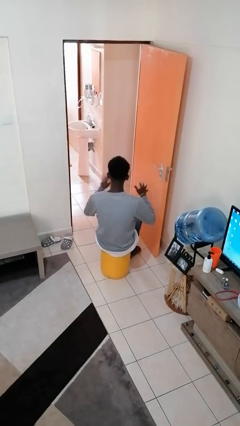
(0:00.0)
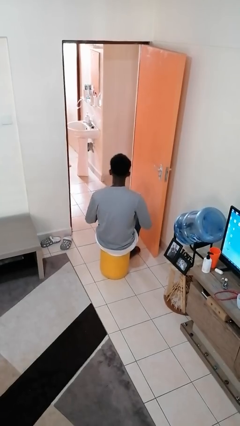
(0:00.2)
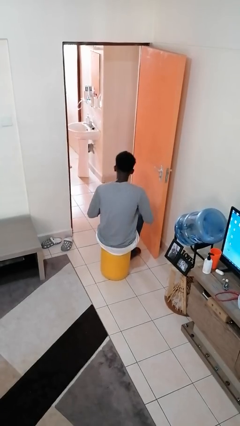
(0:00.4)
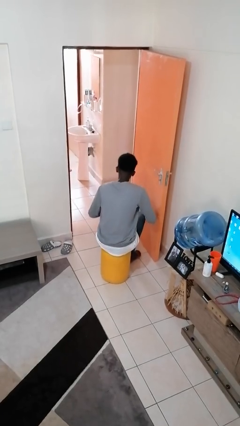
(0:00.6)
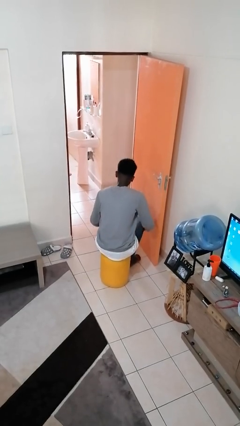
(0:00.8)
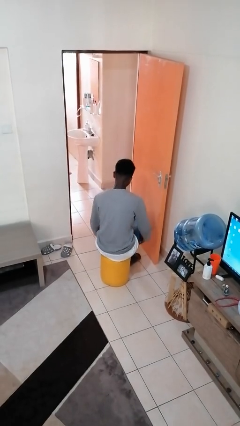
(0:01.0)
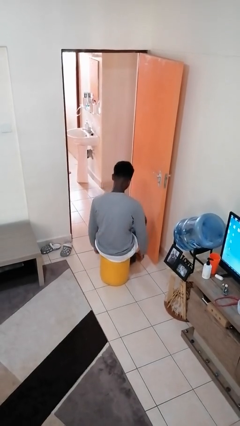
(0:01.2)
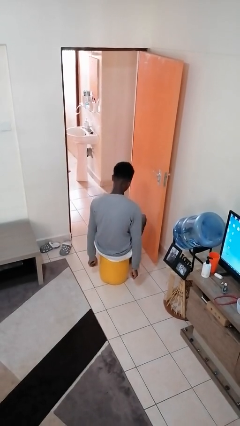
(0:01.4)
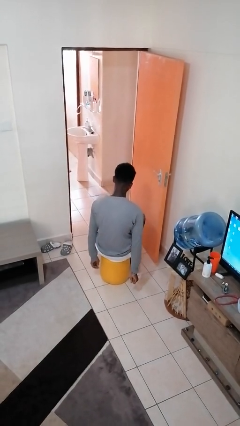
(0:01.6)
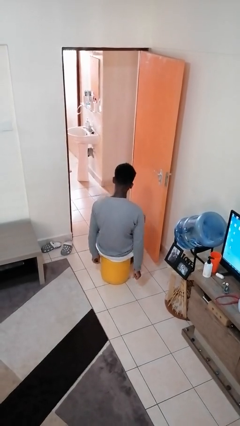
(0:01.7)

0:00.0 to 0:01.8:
person slaps hands on thighs

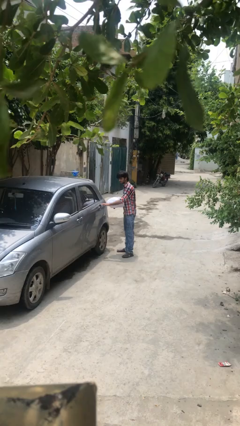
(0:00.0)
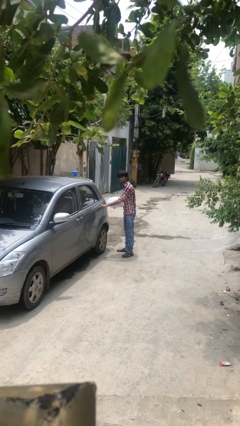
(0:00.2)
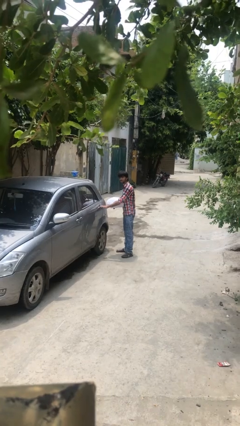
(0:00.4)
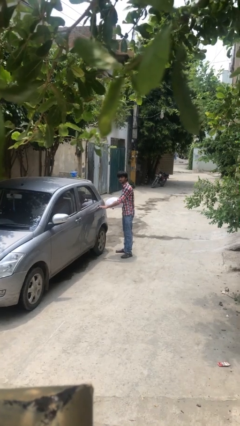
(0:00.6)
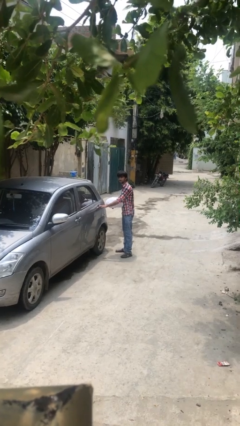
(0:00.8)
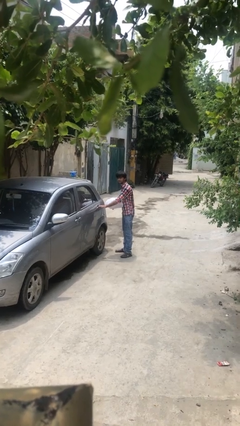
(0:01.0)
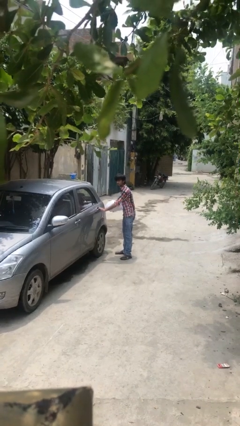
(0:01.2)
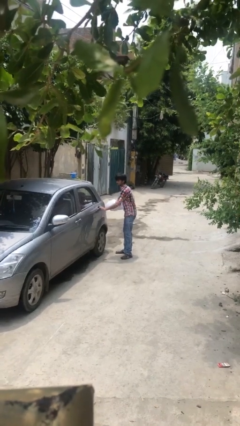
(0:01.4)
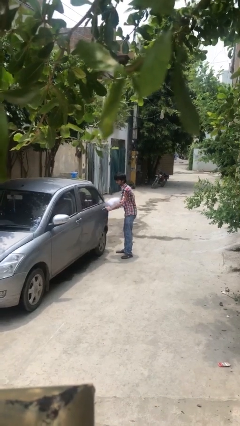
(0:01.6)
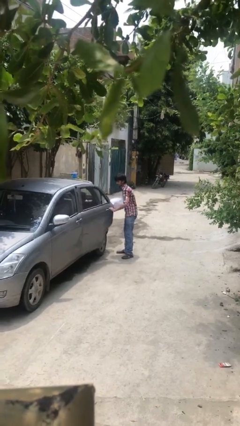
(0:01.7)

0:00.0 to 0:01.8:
person opens car door

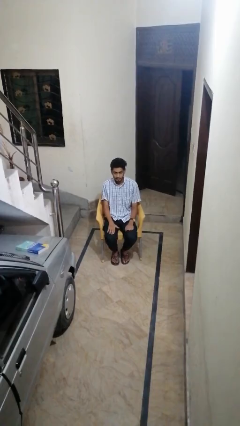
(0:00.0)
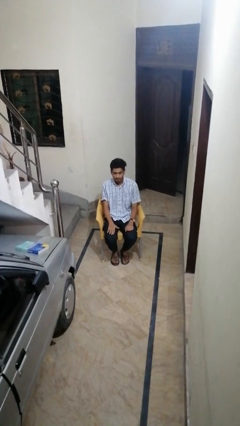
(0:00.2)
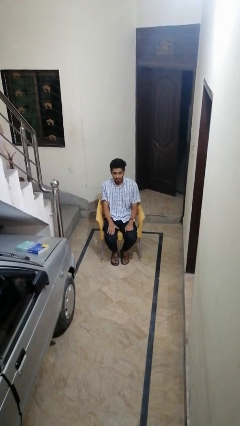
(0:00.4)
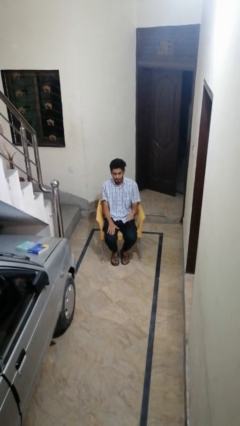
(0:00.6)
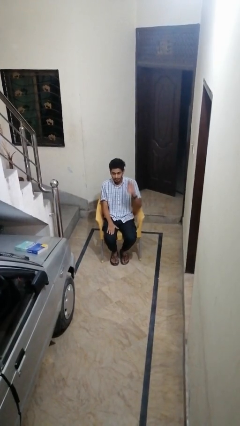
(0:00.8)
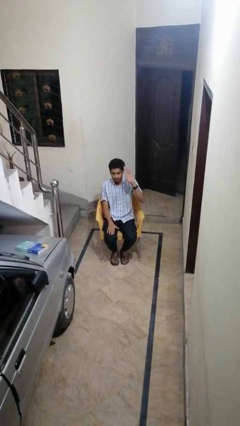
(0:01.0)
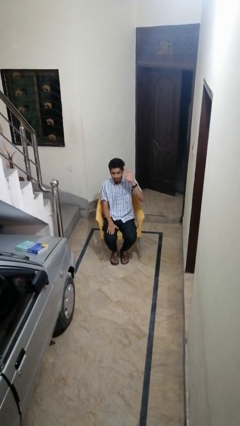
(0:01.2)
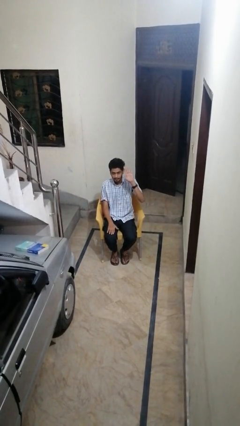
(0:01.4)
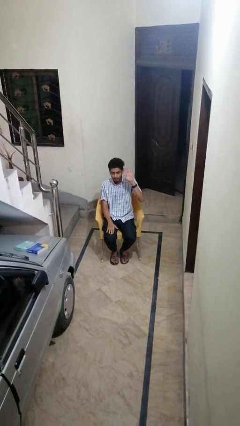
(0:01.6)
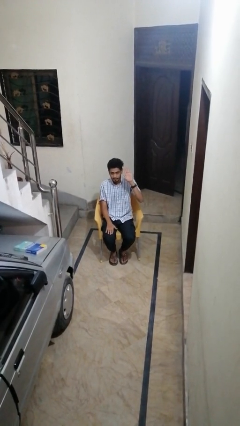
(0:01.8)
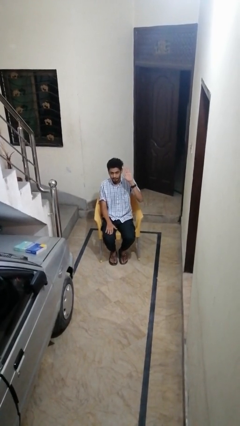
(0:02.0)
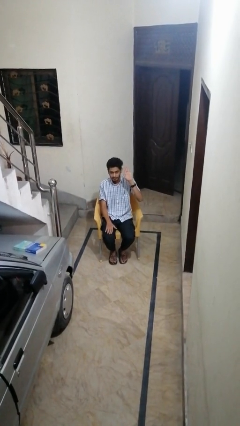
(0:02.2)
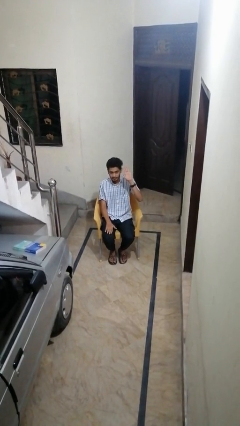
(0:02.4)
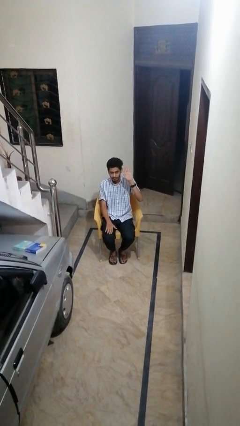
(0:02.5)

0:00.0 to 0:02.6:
person gestures raise hand

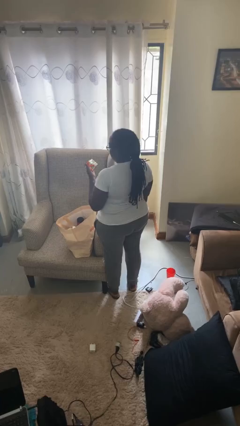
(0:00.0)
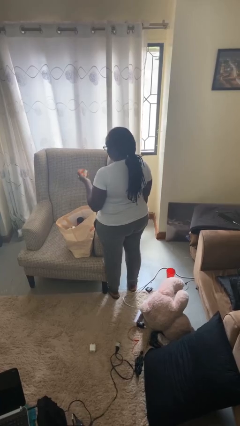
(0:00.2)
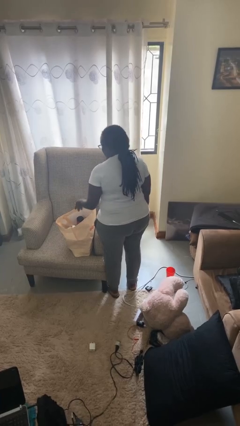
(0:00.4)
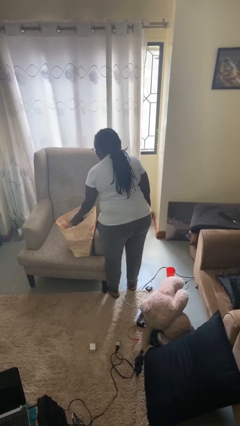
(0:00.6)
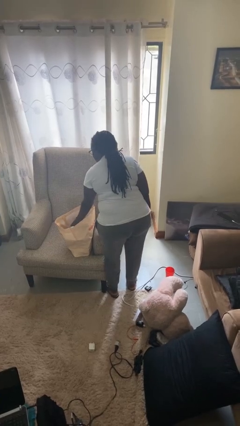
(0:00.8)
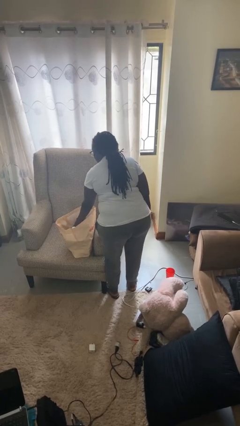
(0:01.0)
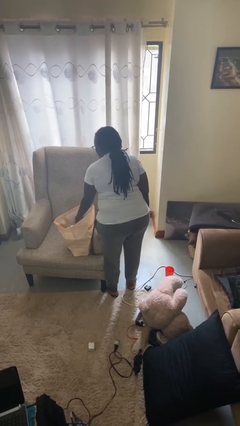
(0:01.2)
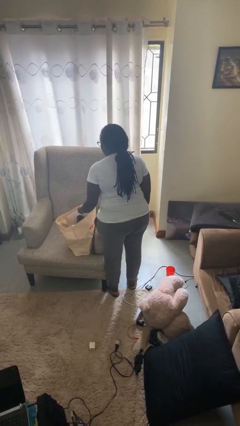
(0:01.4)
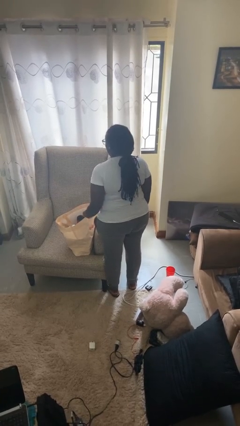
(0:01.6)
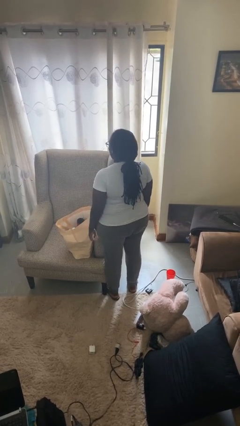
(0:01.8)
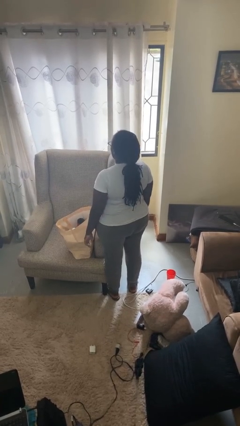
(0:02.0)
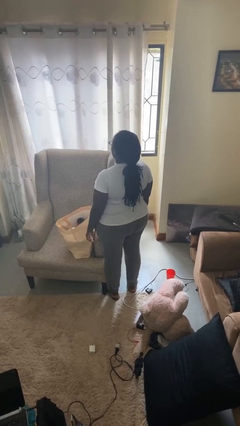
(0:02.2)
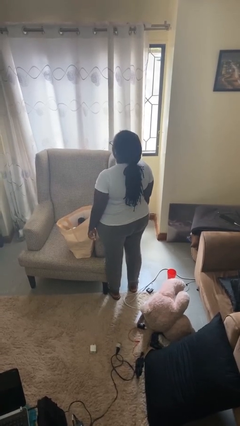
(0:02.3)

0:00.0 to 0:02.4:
person puts object into bag

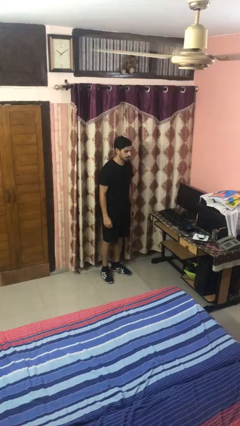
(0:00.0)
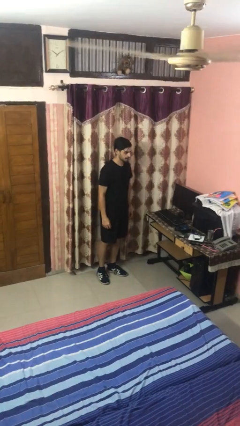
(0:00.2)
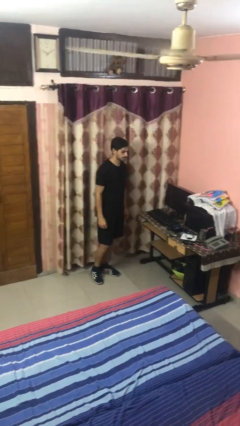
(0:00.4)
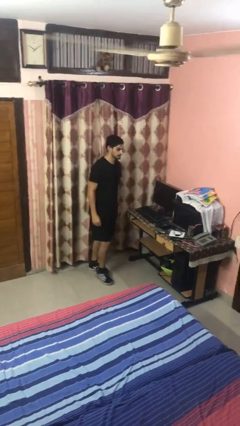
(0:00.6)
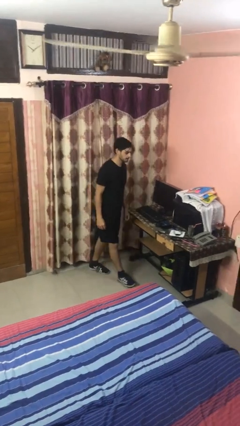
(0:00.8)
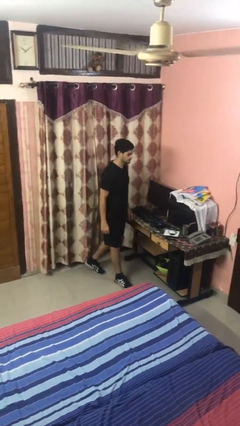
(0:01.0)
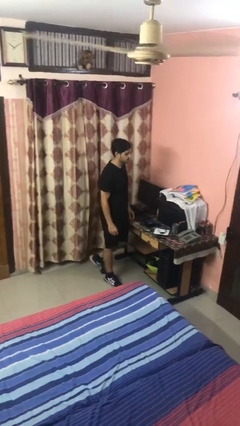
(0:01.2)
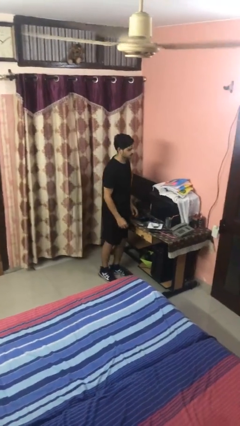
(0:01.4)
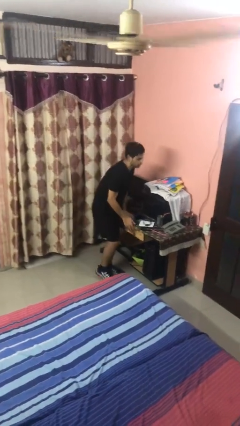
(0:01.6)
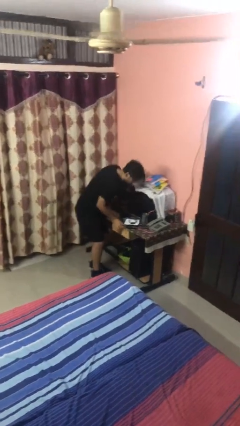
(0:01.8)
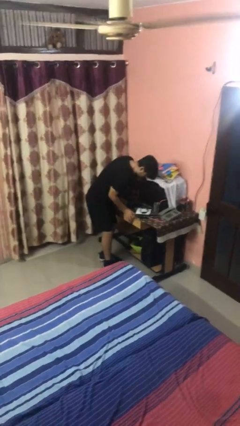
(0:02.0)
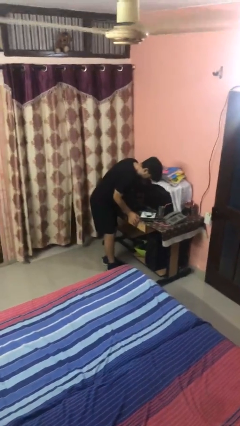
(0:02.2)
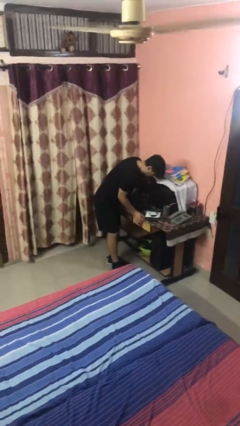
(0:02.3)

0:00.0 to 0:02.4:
person bumps into table

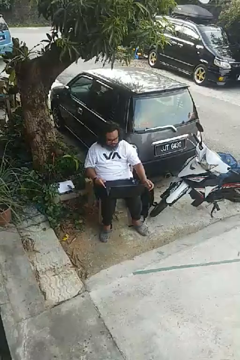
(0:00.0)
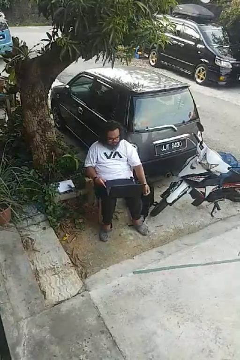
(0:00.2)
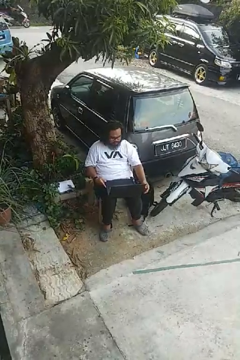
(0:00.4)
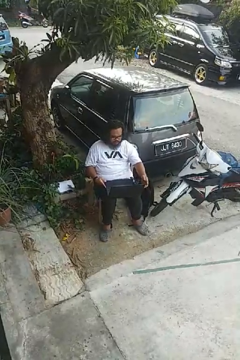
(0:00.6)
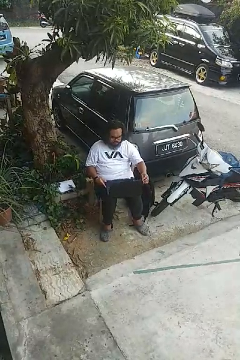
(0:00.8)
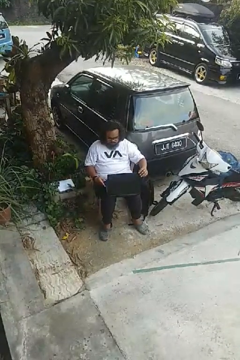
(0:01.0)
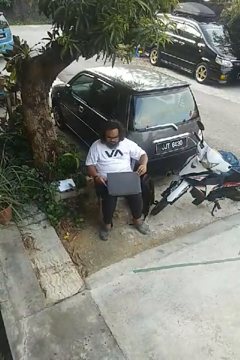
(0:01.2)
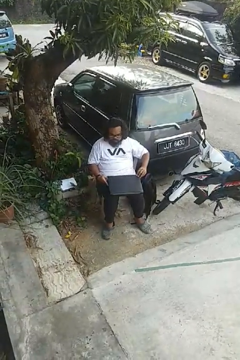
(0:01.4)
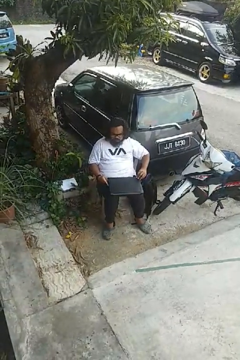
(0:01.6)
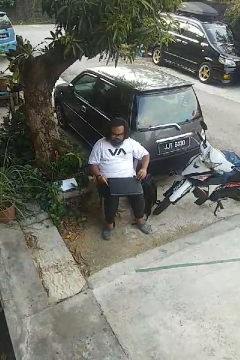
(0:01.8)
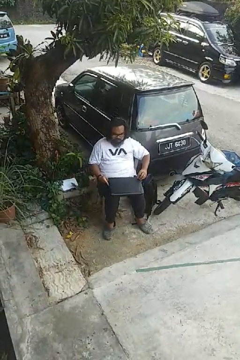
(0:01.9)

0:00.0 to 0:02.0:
person closes laptop

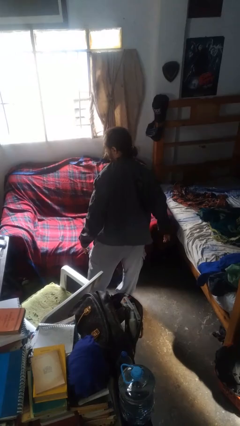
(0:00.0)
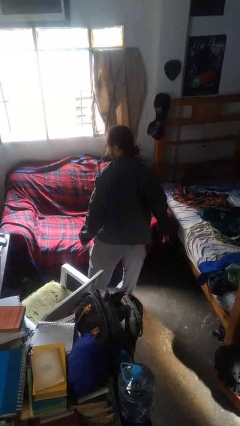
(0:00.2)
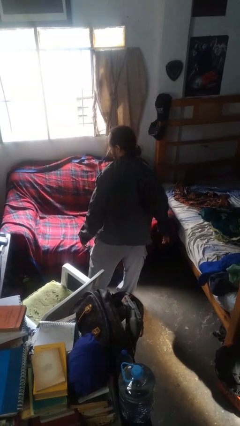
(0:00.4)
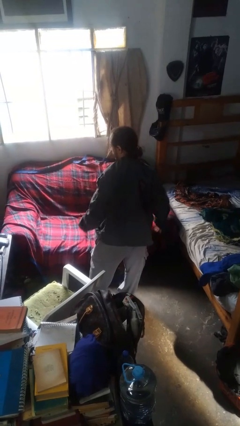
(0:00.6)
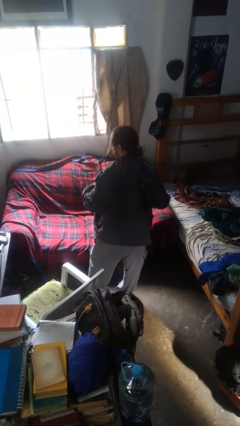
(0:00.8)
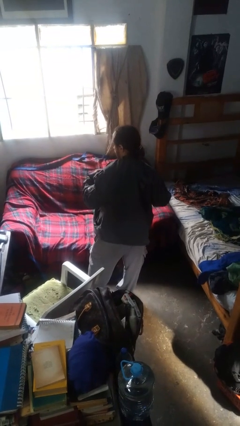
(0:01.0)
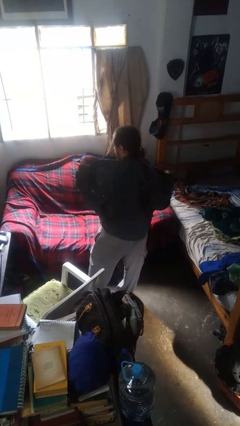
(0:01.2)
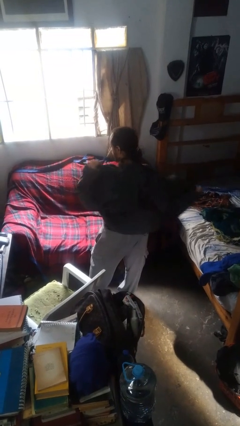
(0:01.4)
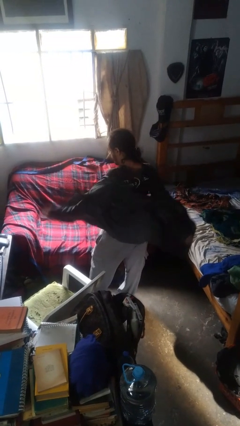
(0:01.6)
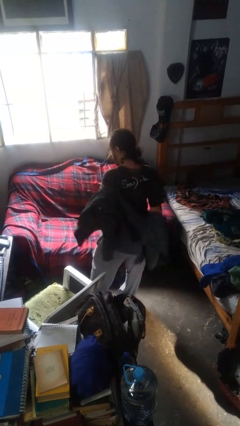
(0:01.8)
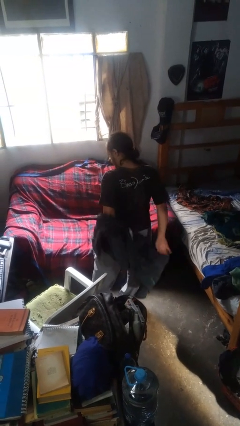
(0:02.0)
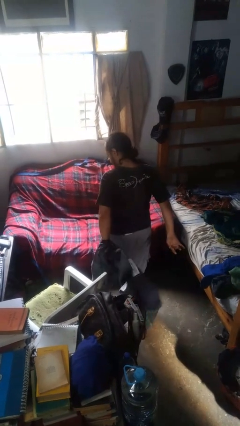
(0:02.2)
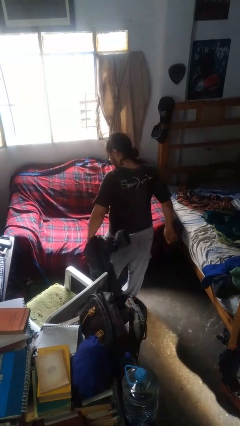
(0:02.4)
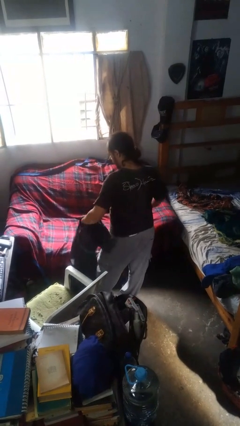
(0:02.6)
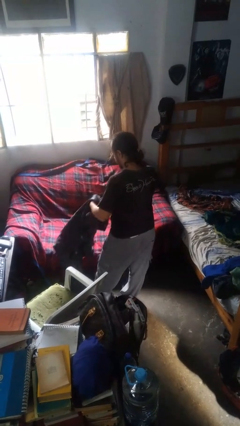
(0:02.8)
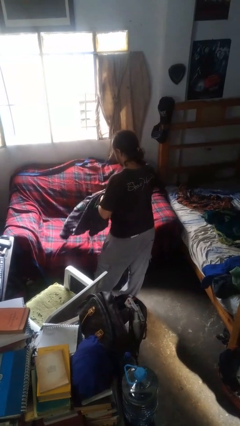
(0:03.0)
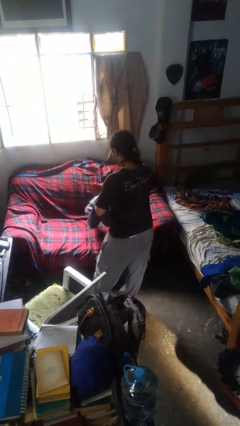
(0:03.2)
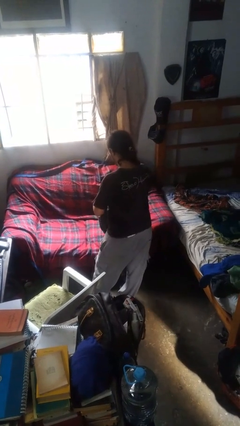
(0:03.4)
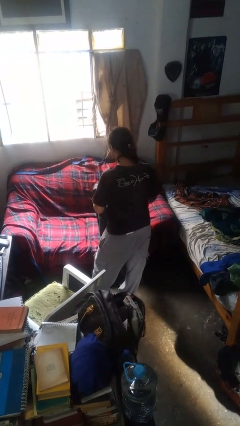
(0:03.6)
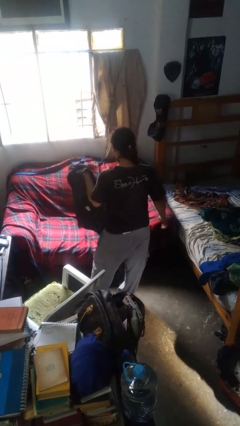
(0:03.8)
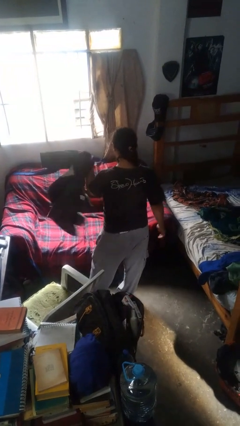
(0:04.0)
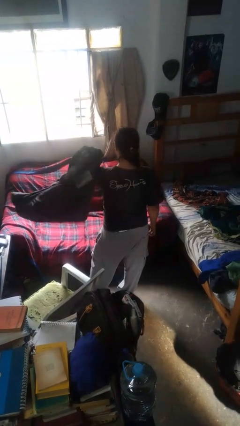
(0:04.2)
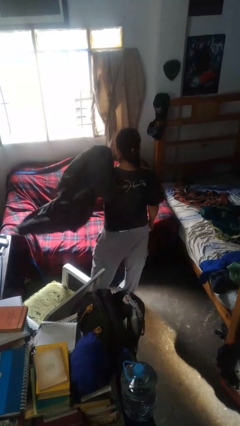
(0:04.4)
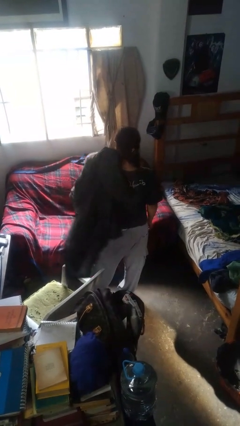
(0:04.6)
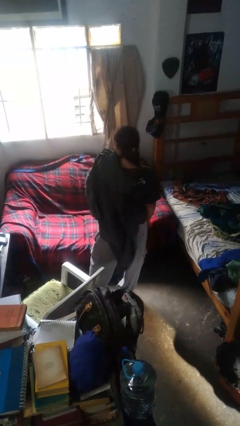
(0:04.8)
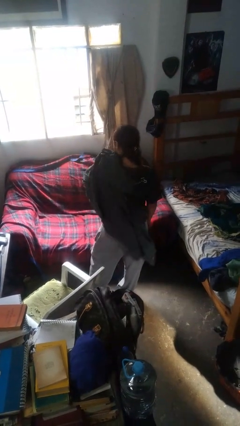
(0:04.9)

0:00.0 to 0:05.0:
person takes off jacket
